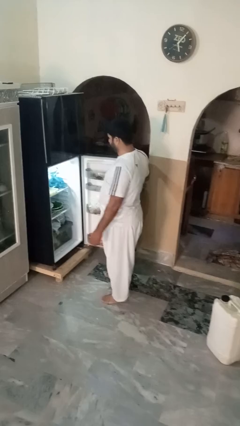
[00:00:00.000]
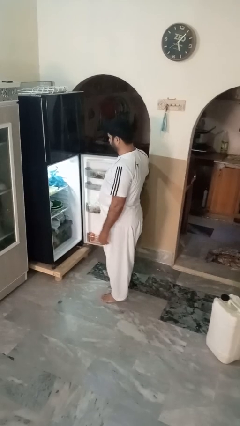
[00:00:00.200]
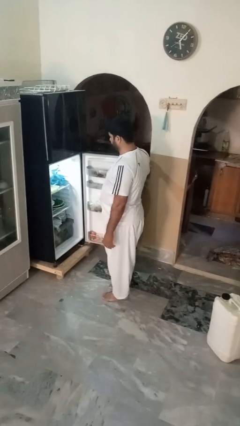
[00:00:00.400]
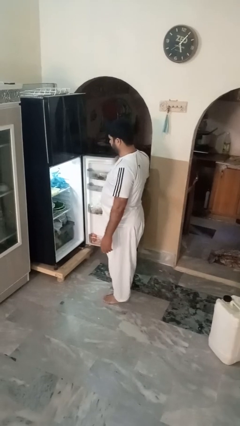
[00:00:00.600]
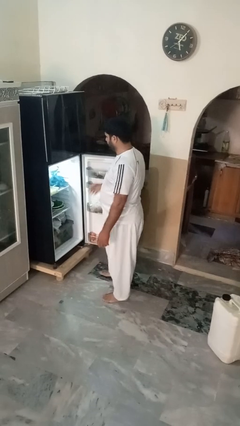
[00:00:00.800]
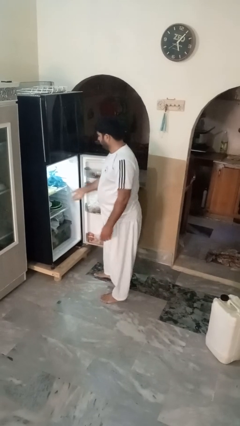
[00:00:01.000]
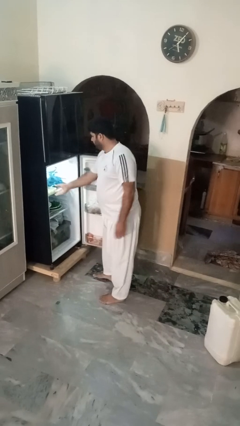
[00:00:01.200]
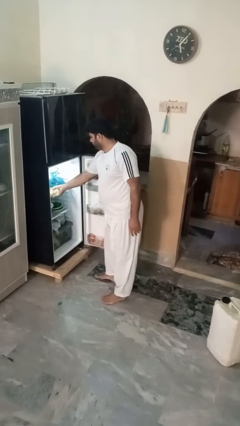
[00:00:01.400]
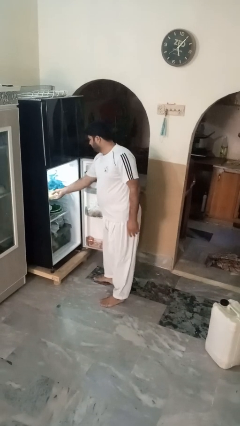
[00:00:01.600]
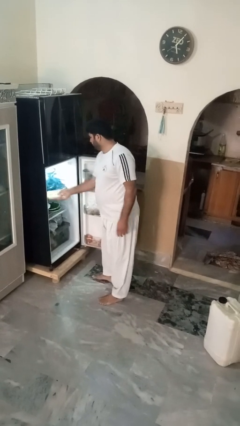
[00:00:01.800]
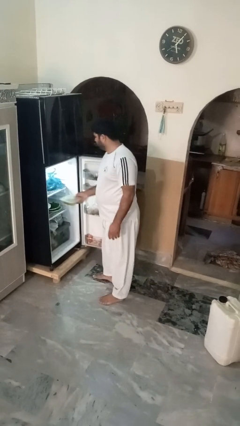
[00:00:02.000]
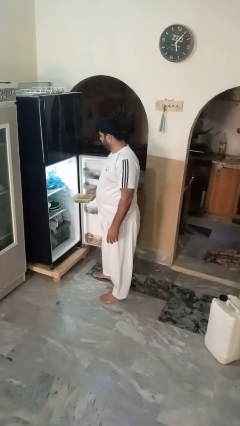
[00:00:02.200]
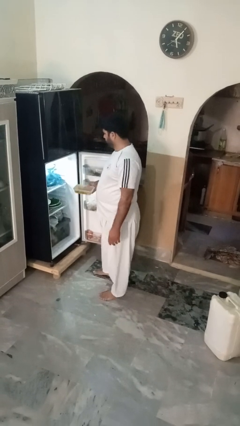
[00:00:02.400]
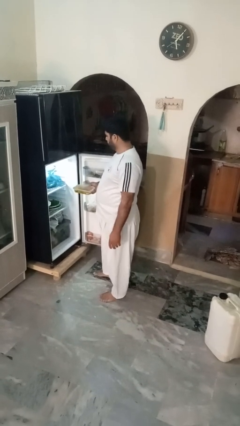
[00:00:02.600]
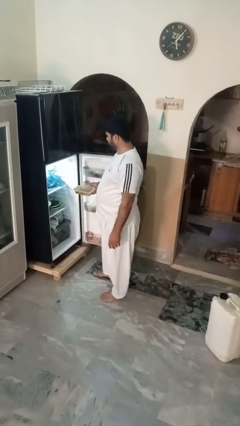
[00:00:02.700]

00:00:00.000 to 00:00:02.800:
person takes object from refrigerator

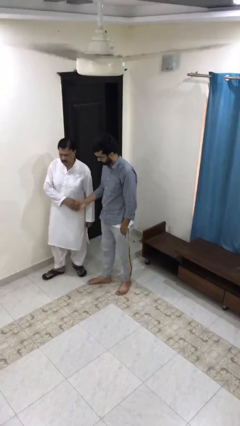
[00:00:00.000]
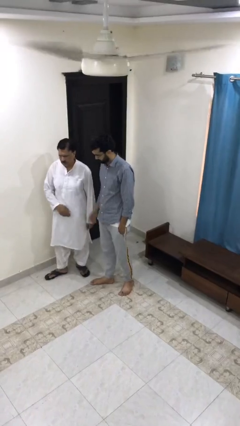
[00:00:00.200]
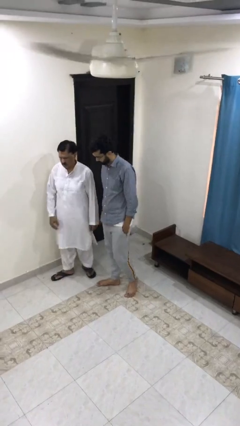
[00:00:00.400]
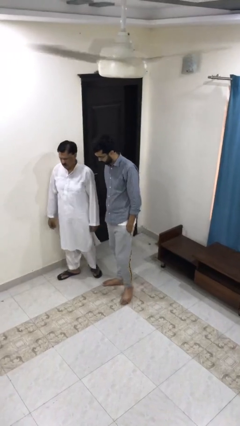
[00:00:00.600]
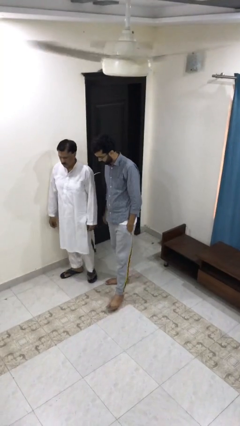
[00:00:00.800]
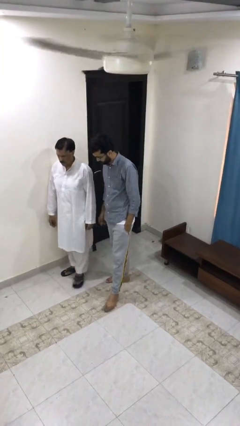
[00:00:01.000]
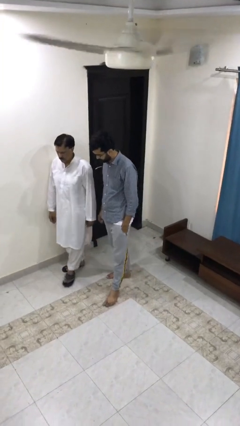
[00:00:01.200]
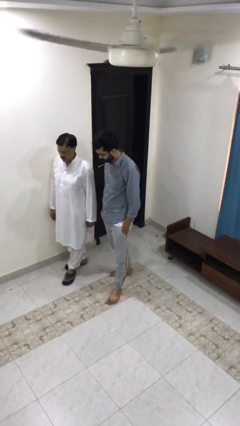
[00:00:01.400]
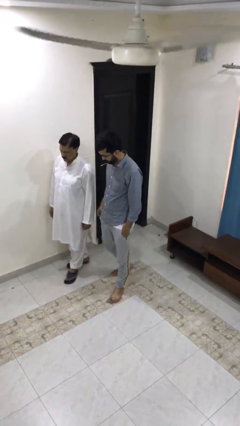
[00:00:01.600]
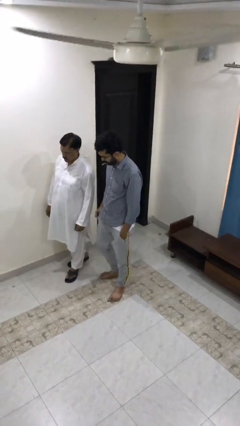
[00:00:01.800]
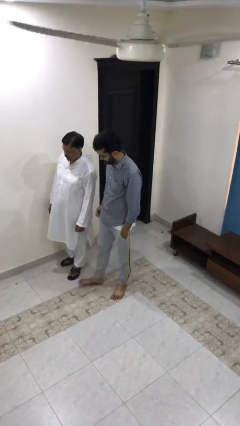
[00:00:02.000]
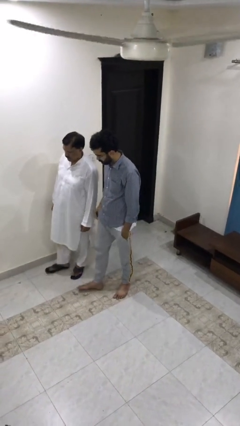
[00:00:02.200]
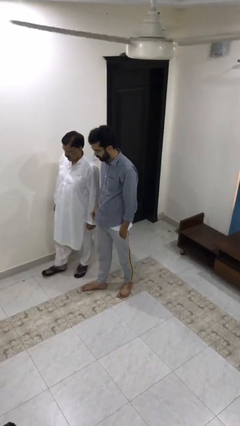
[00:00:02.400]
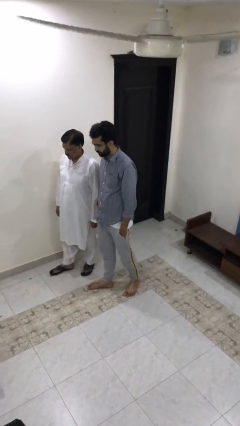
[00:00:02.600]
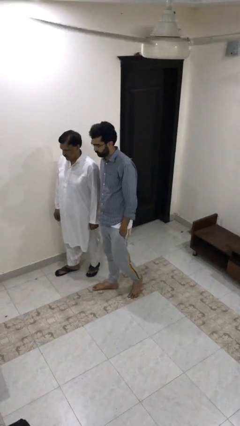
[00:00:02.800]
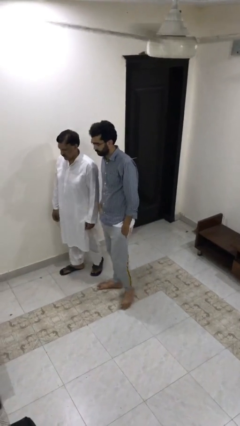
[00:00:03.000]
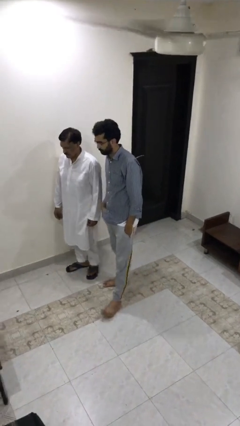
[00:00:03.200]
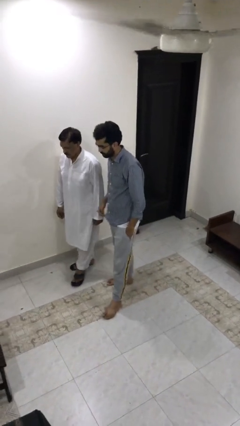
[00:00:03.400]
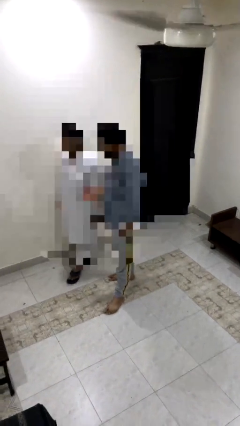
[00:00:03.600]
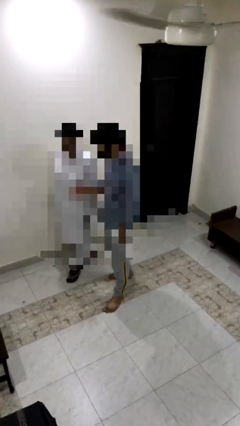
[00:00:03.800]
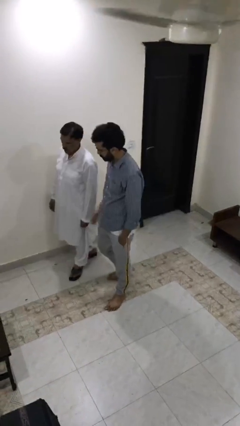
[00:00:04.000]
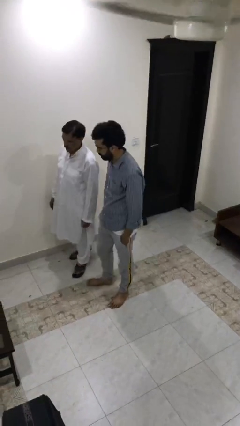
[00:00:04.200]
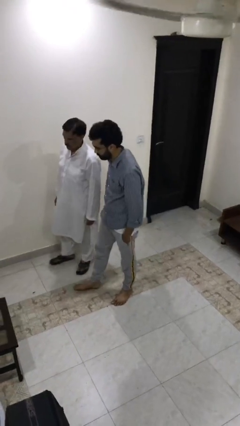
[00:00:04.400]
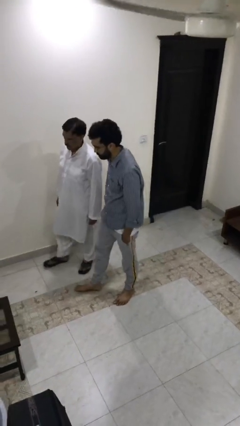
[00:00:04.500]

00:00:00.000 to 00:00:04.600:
person talks to person

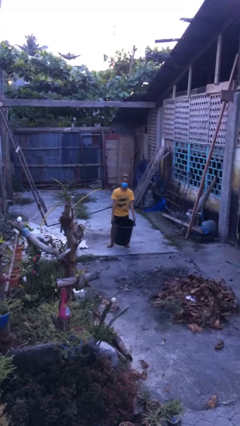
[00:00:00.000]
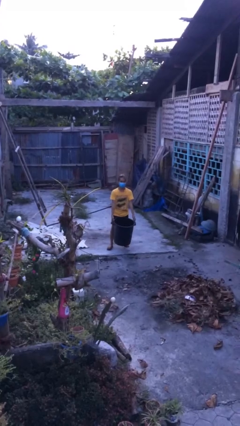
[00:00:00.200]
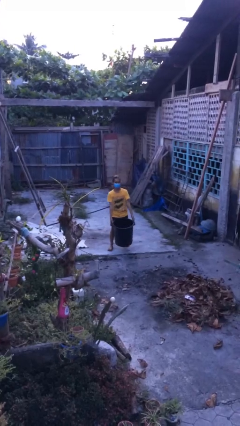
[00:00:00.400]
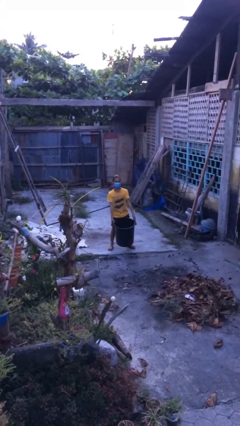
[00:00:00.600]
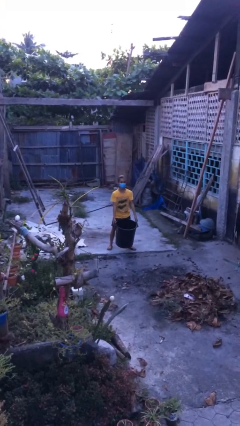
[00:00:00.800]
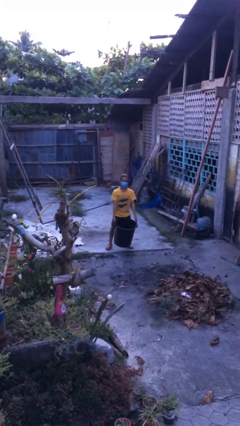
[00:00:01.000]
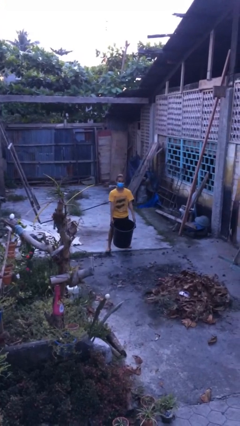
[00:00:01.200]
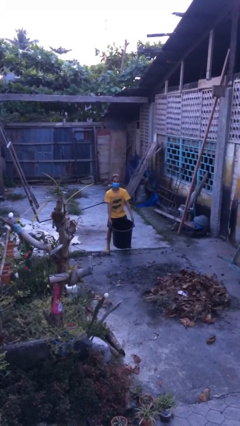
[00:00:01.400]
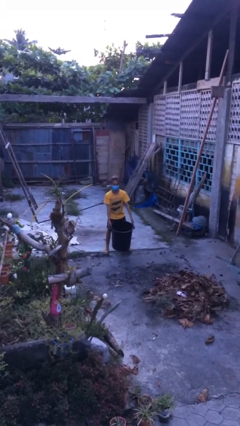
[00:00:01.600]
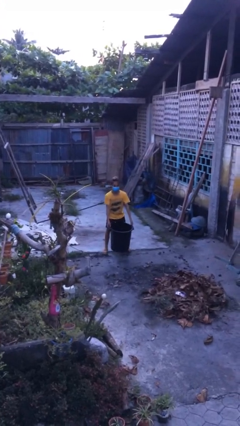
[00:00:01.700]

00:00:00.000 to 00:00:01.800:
person carries heavy object

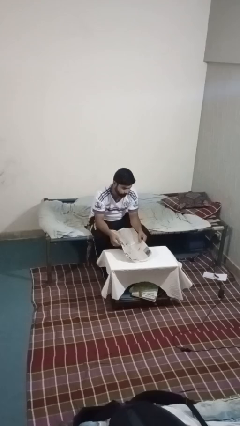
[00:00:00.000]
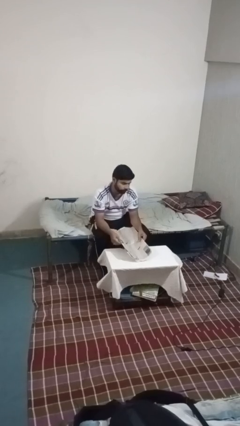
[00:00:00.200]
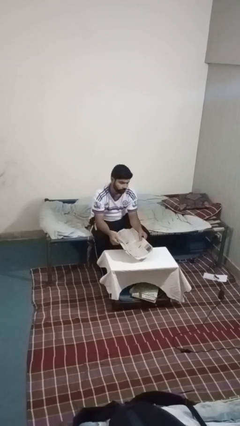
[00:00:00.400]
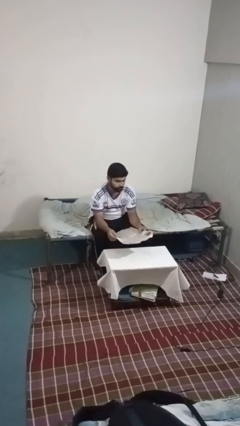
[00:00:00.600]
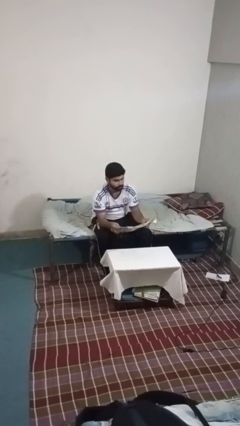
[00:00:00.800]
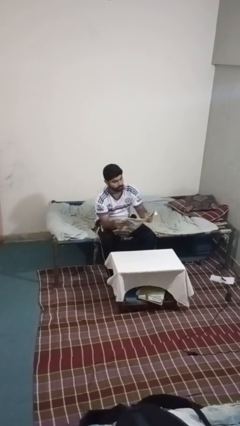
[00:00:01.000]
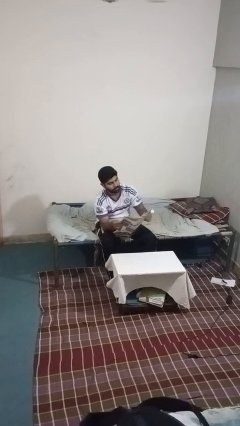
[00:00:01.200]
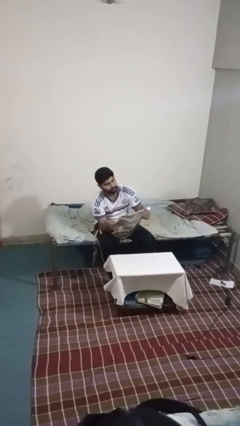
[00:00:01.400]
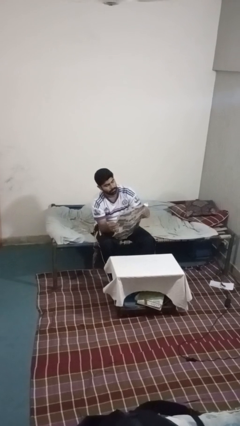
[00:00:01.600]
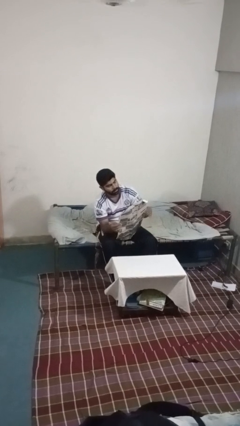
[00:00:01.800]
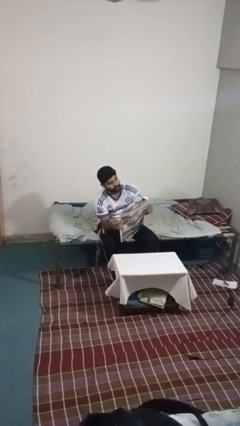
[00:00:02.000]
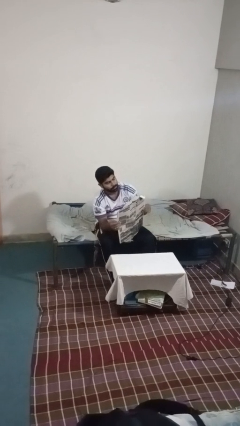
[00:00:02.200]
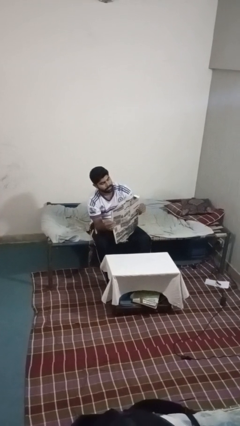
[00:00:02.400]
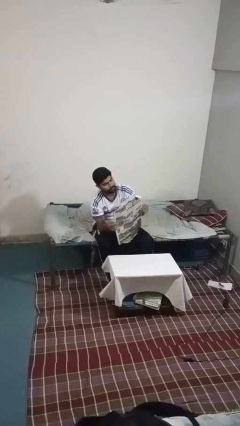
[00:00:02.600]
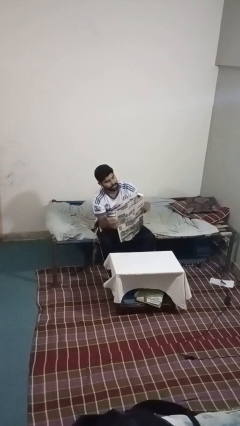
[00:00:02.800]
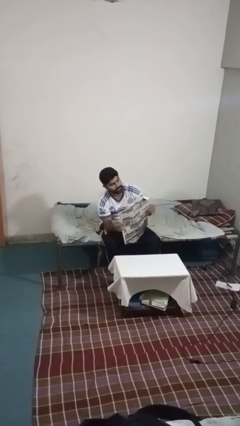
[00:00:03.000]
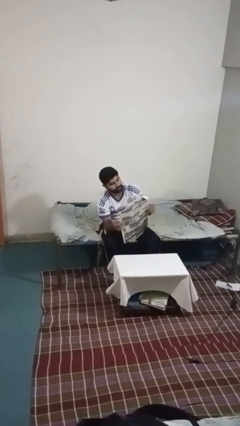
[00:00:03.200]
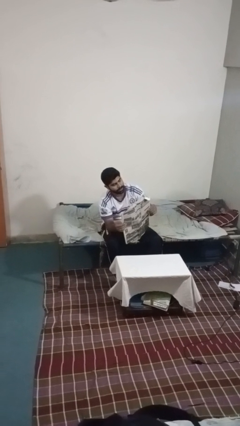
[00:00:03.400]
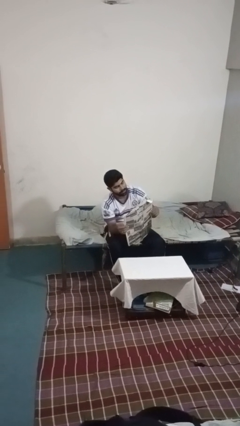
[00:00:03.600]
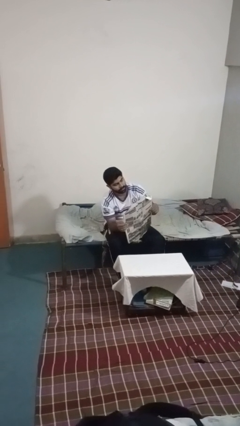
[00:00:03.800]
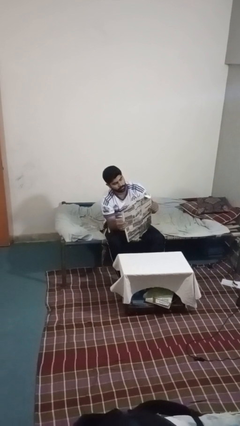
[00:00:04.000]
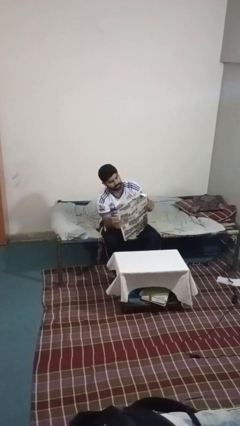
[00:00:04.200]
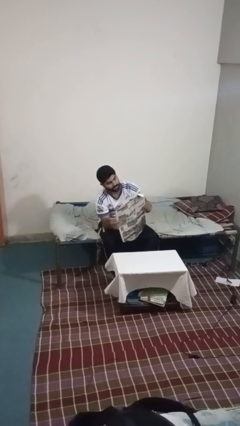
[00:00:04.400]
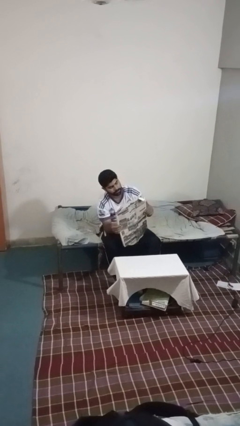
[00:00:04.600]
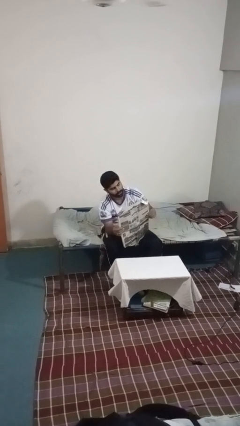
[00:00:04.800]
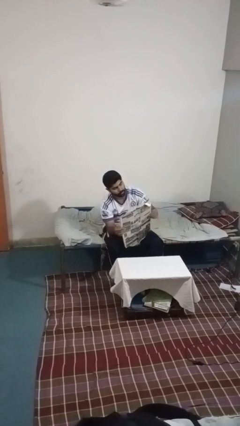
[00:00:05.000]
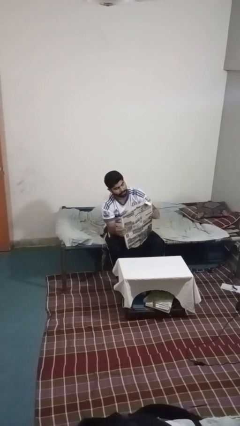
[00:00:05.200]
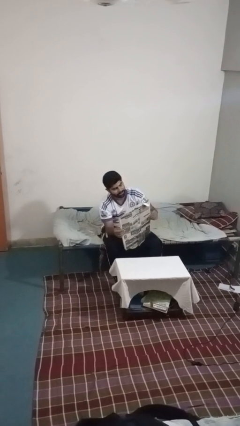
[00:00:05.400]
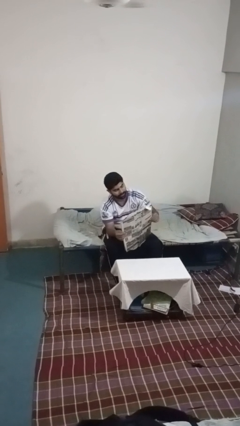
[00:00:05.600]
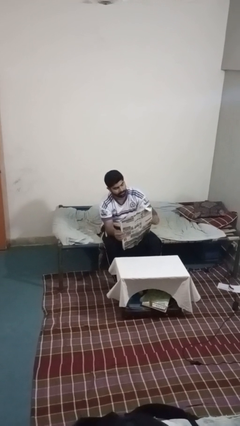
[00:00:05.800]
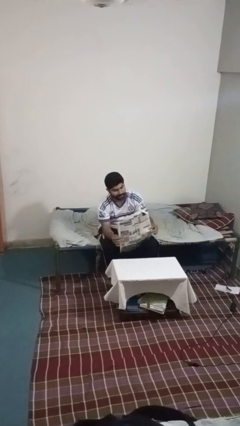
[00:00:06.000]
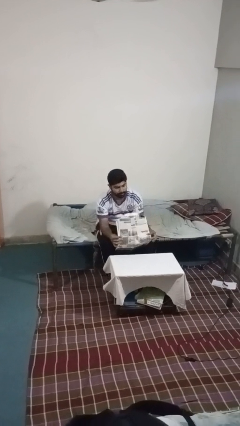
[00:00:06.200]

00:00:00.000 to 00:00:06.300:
person reads newspaper

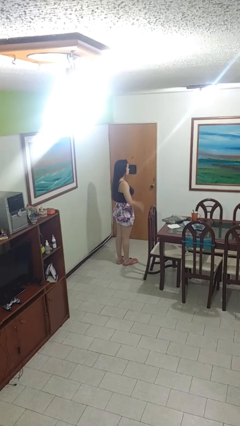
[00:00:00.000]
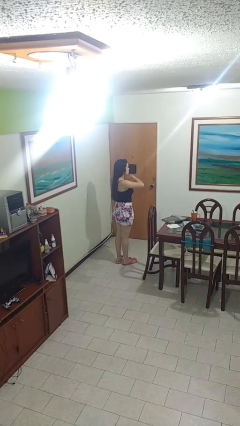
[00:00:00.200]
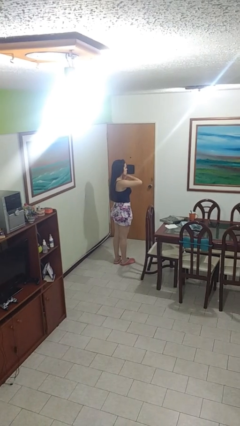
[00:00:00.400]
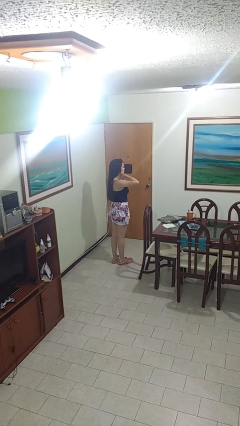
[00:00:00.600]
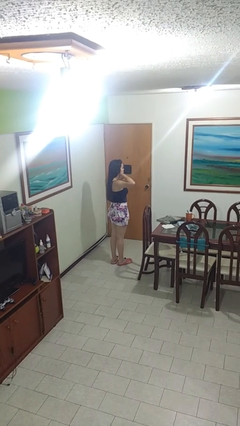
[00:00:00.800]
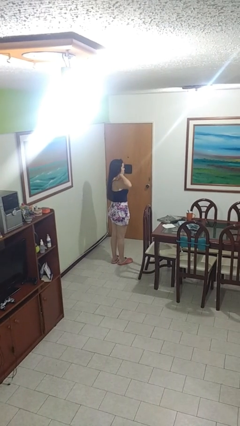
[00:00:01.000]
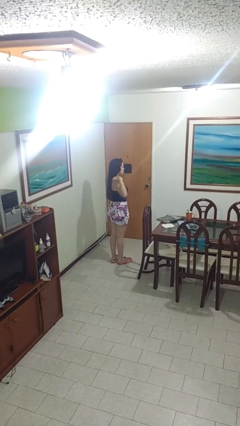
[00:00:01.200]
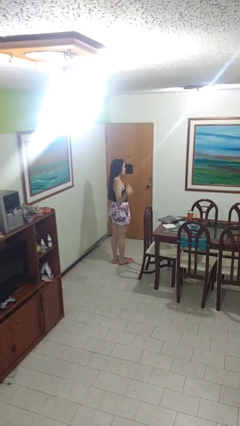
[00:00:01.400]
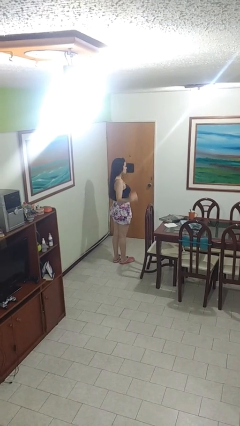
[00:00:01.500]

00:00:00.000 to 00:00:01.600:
person gestures cut

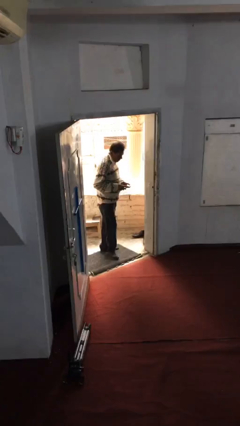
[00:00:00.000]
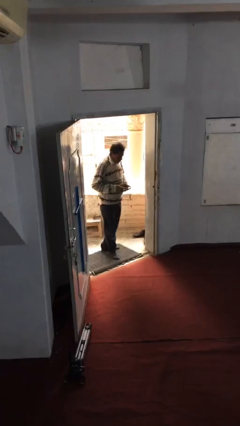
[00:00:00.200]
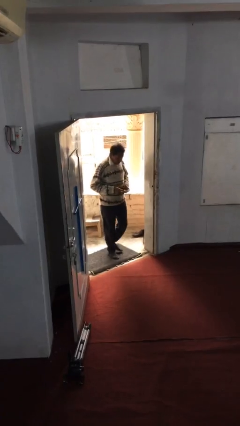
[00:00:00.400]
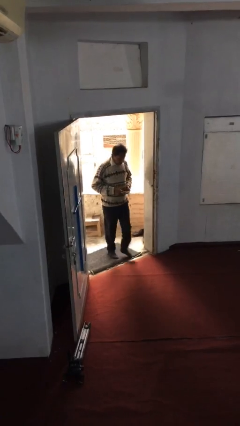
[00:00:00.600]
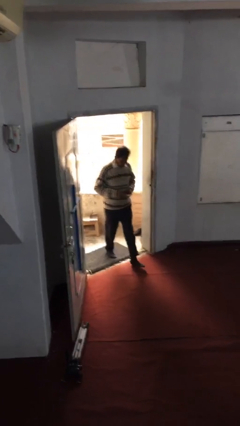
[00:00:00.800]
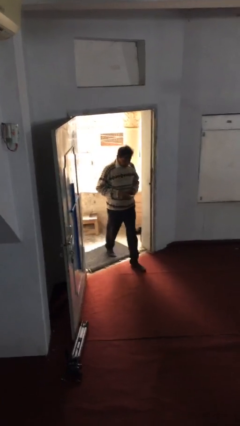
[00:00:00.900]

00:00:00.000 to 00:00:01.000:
person enters scene through structure
